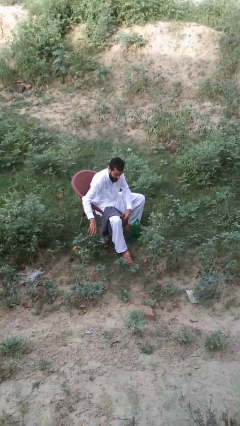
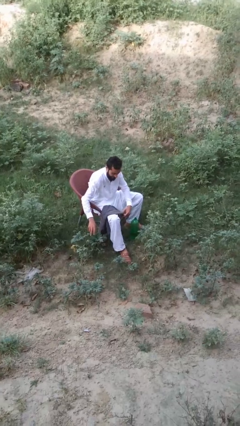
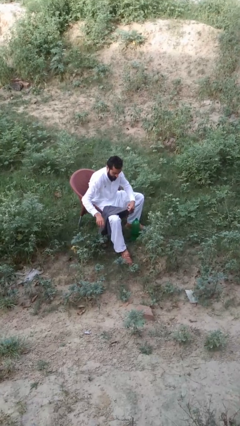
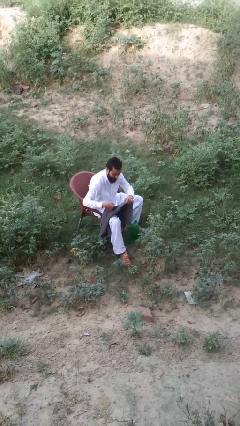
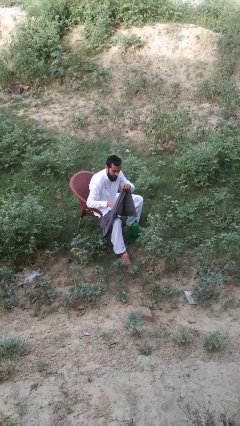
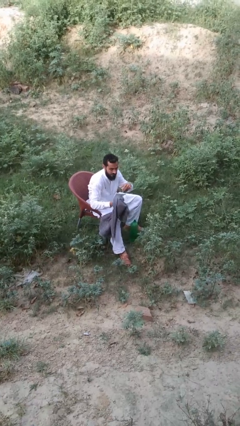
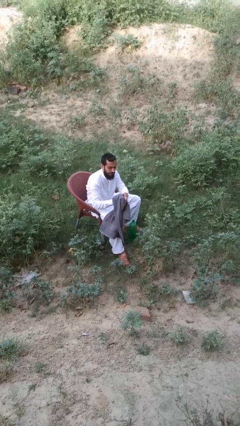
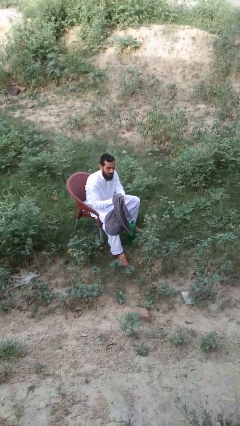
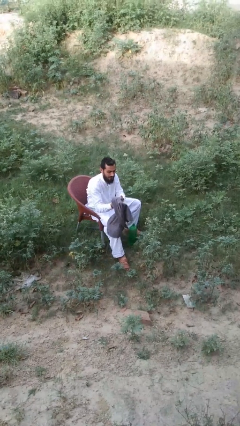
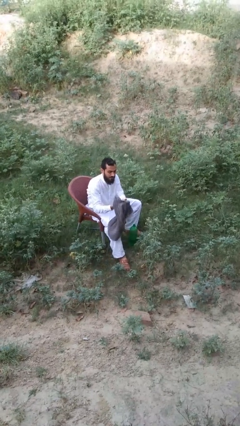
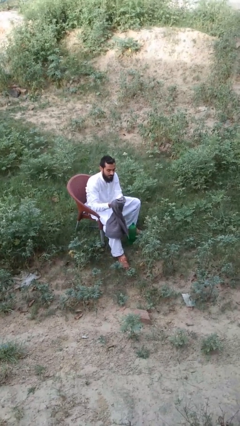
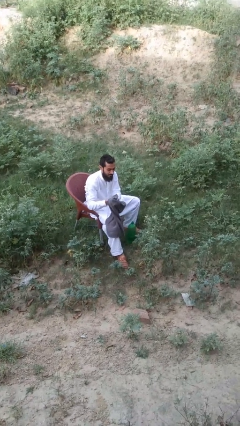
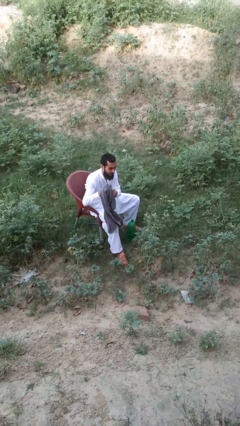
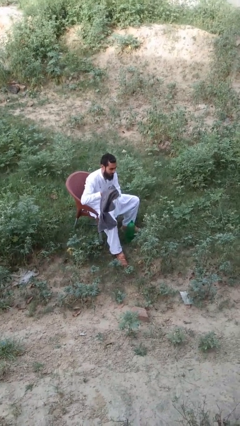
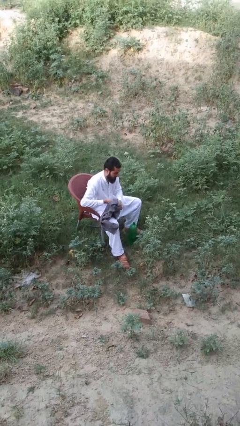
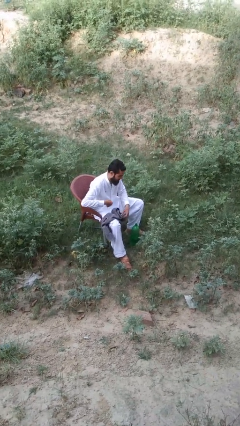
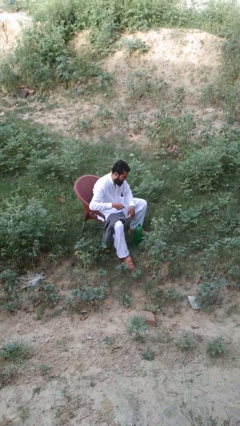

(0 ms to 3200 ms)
person dries hands with towel

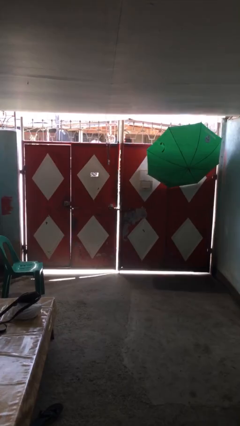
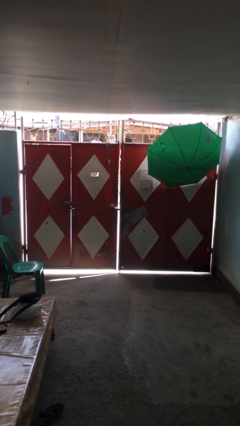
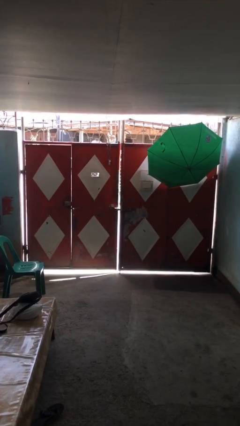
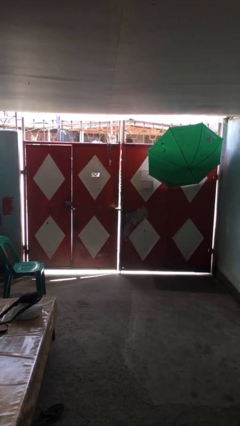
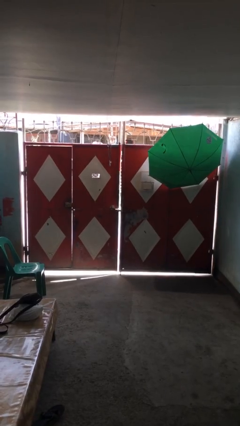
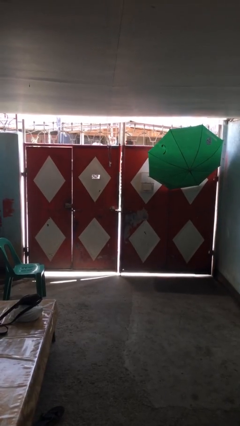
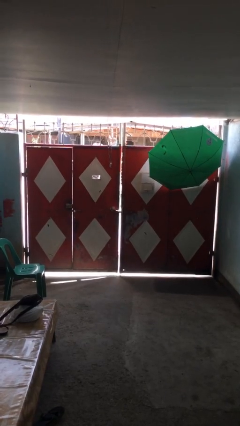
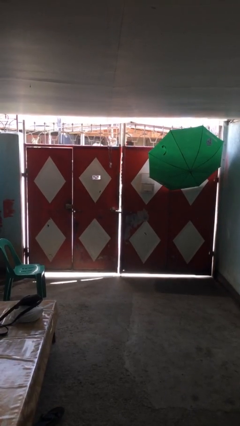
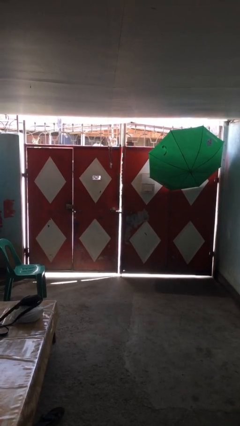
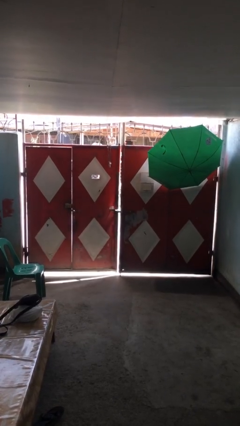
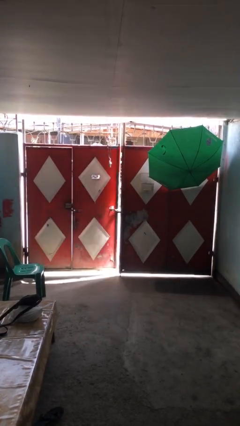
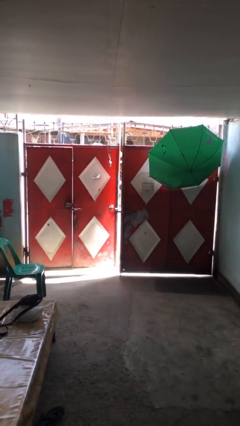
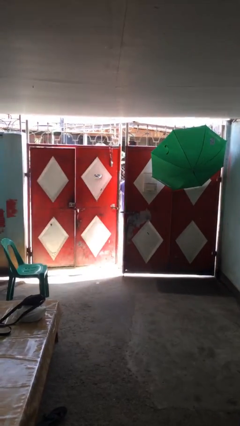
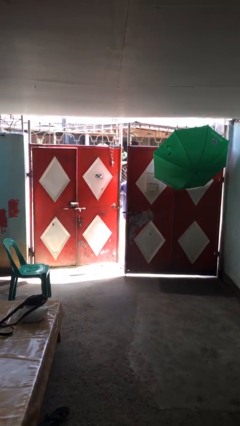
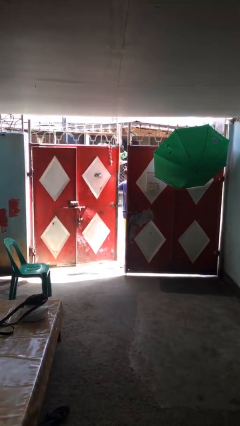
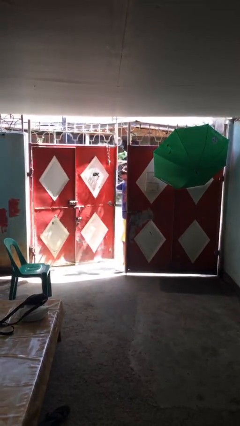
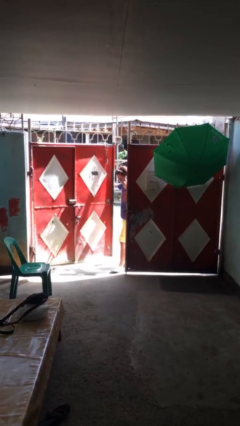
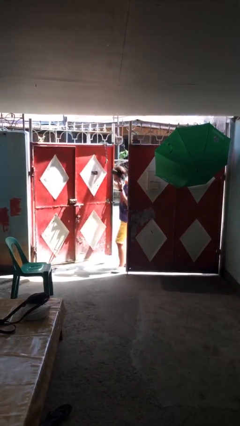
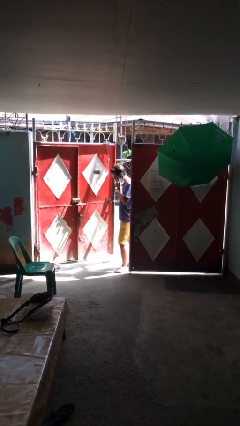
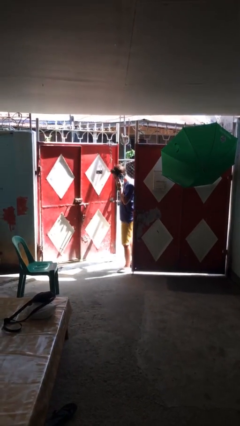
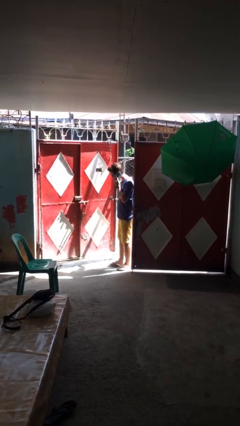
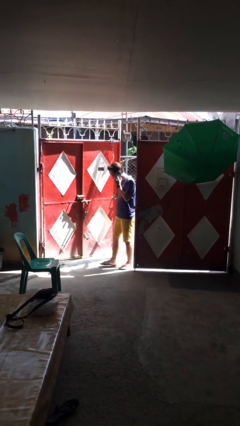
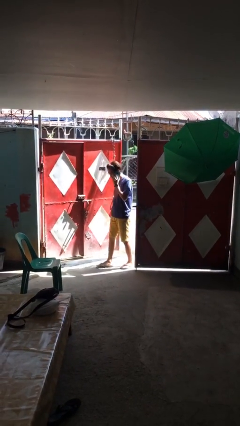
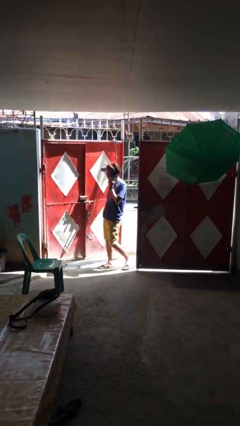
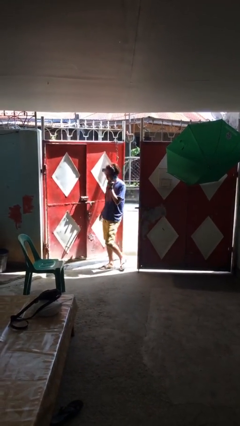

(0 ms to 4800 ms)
person opens facility door

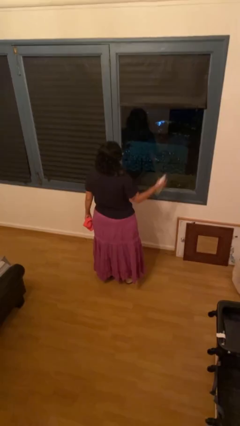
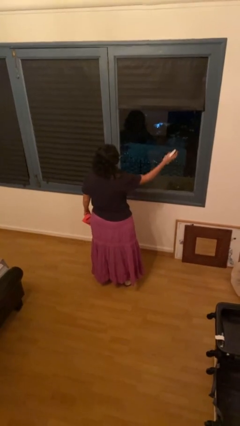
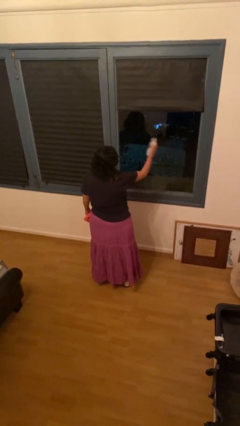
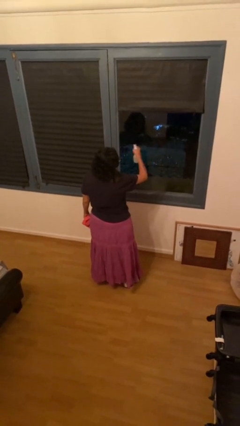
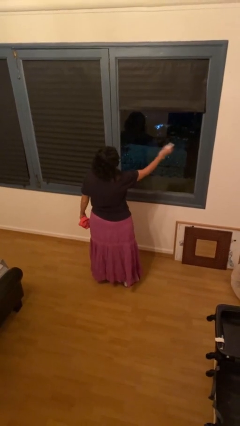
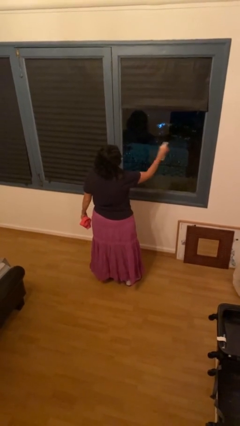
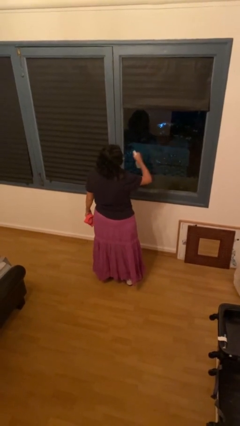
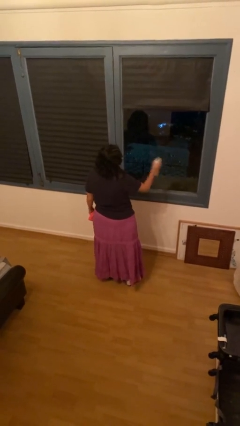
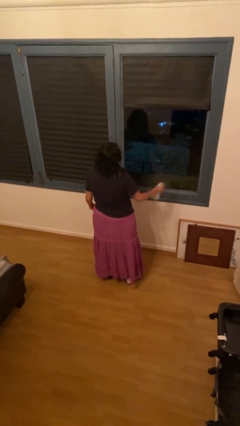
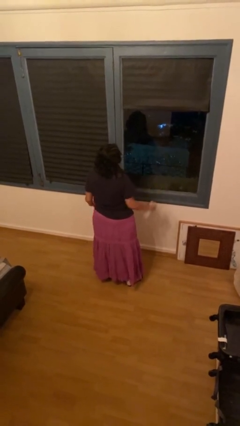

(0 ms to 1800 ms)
person sprays from bottle

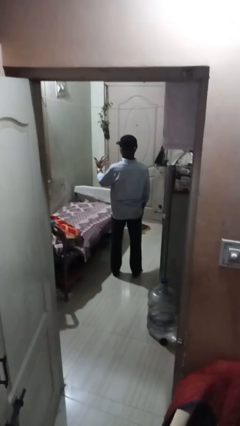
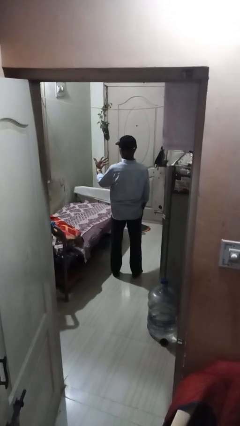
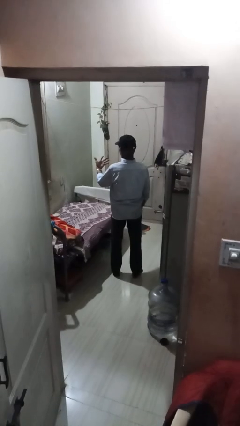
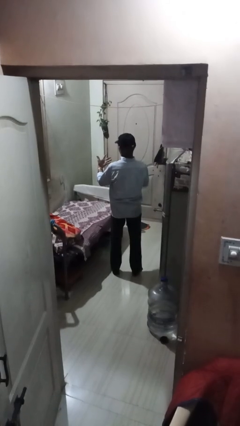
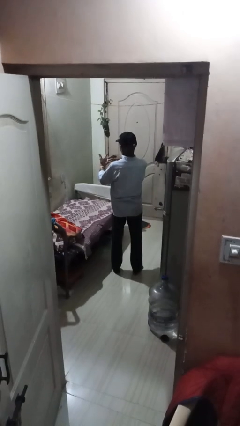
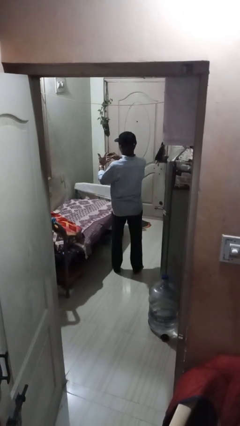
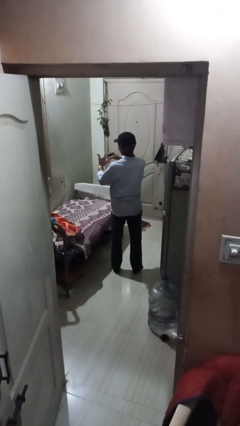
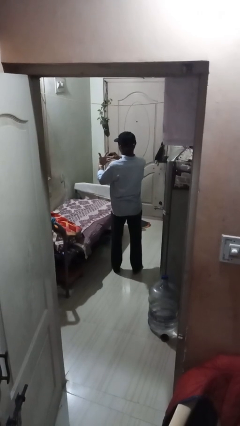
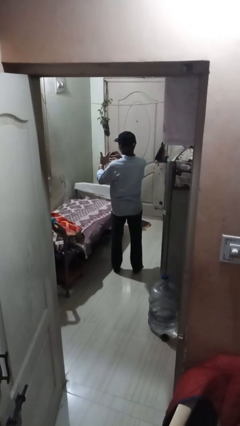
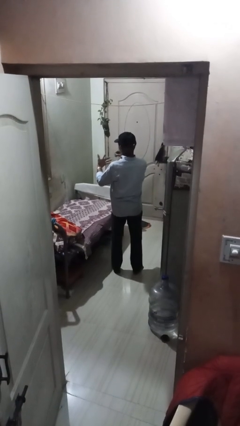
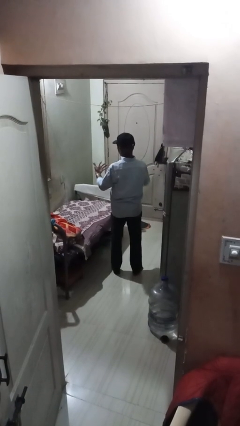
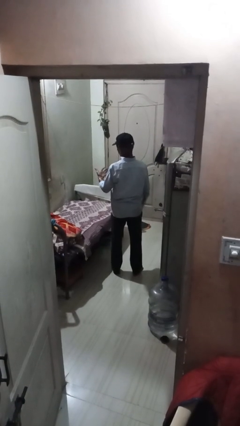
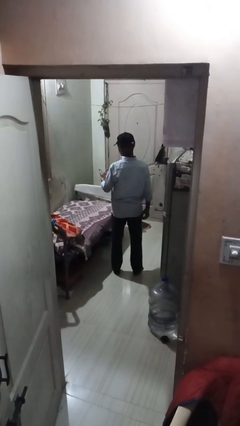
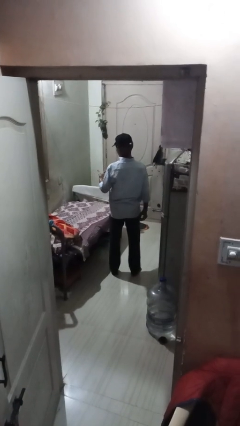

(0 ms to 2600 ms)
person takes off ring

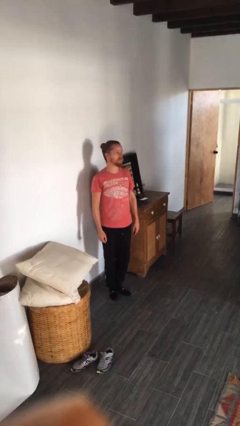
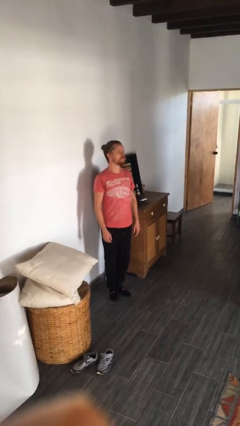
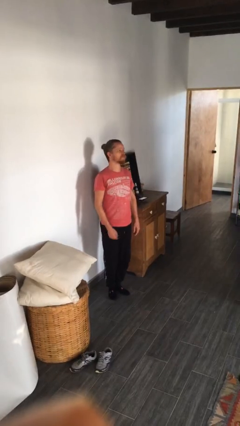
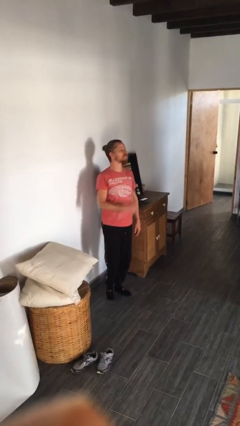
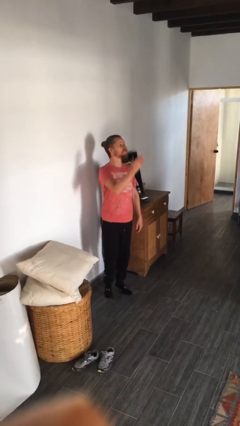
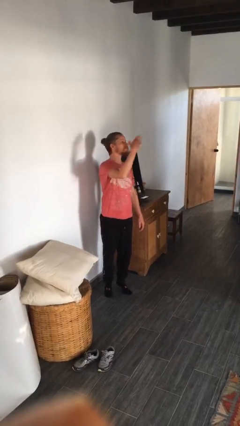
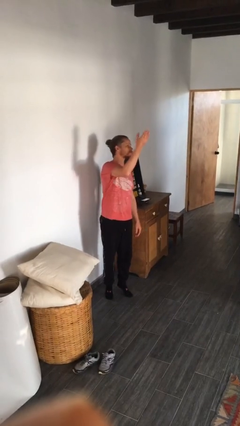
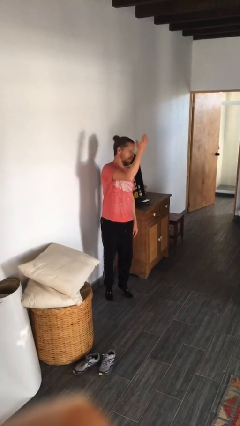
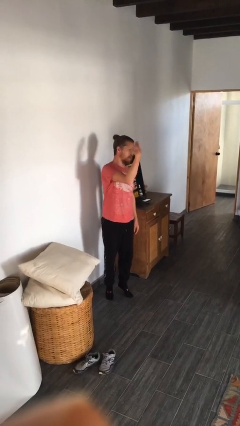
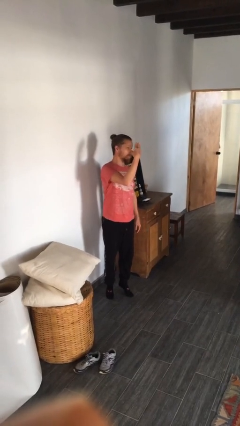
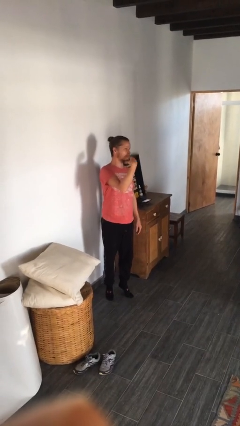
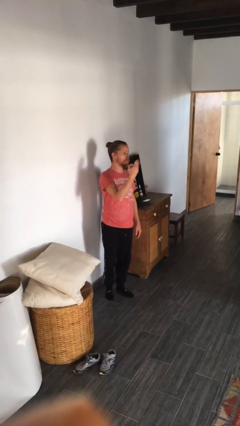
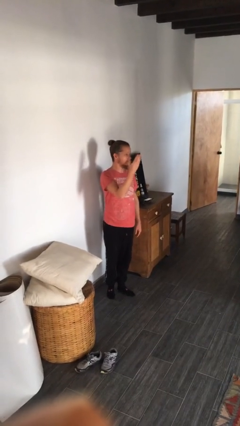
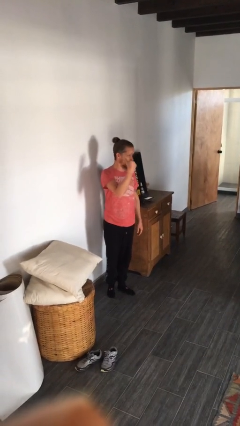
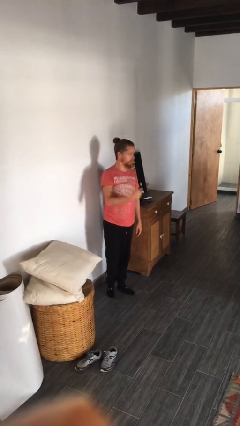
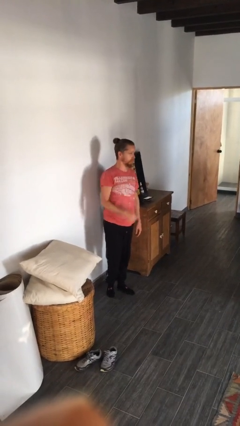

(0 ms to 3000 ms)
person gestures come here

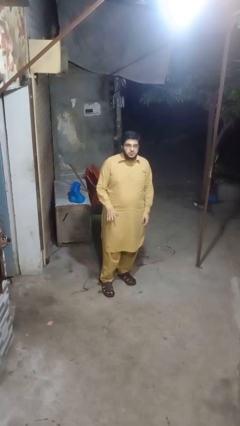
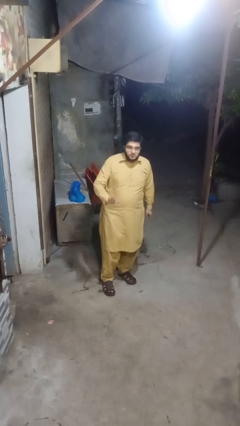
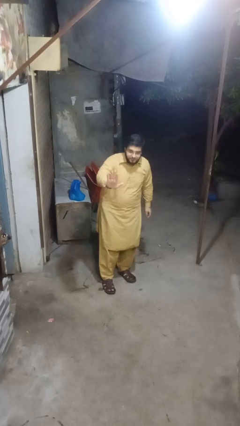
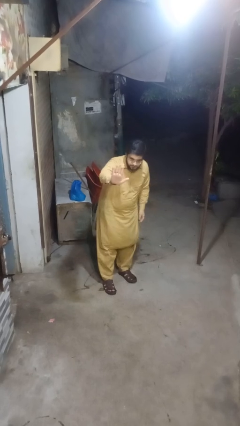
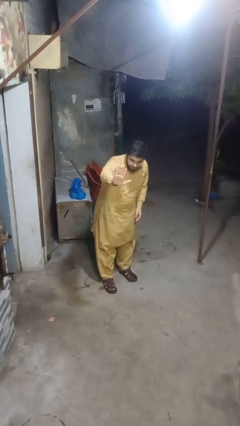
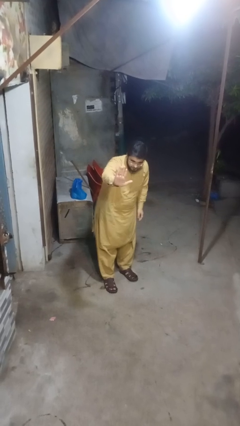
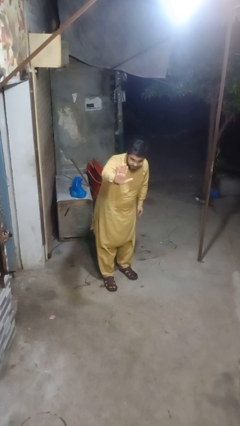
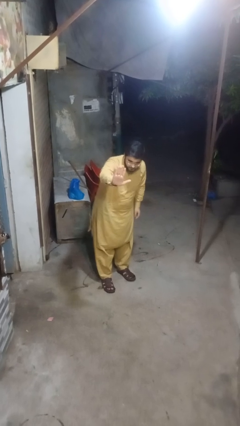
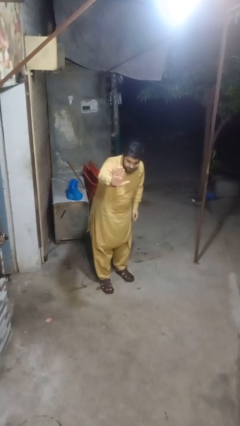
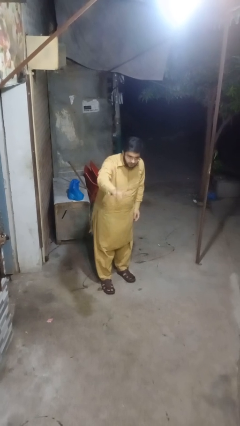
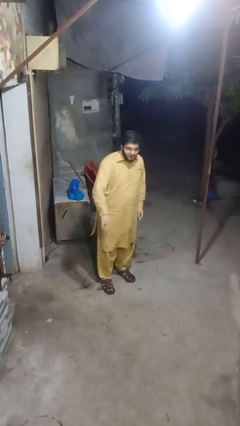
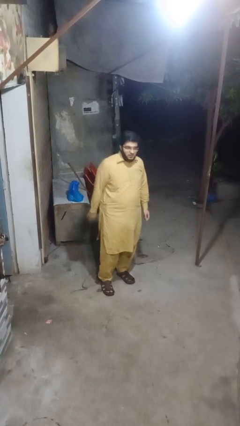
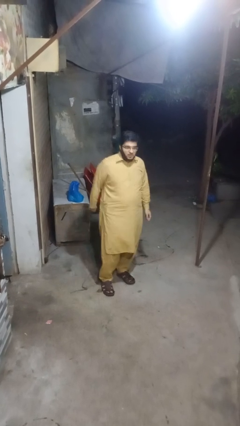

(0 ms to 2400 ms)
person gestures stop
